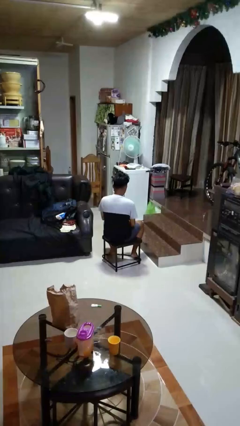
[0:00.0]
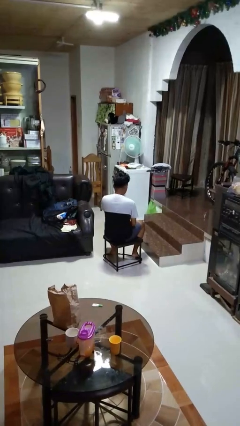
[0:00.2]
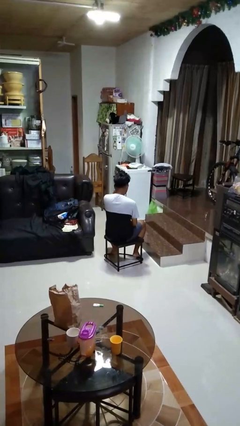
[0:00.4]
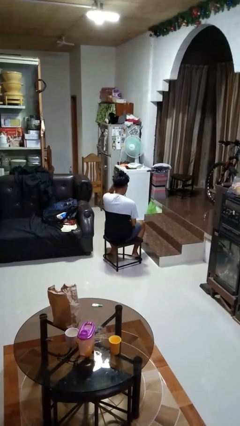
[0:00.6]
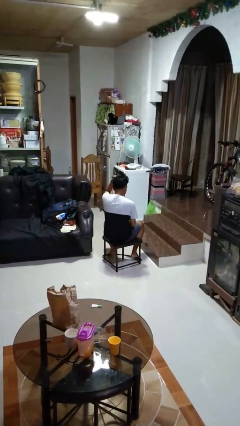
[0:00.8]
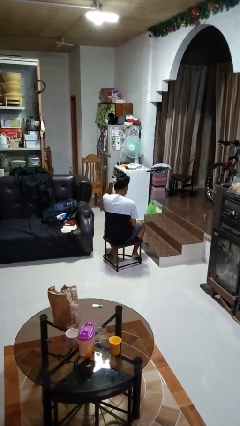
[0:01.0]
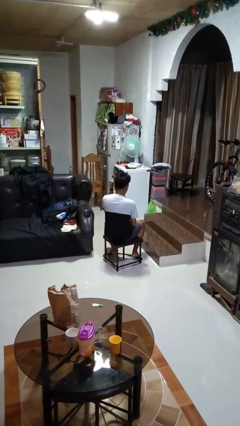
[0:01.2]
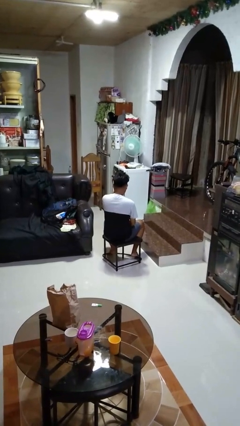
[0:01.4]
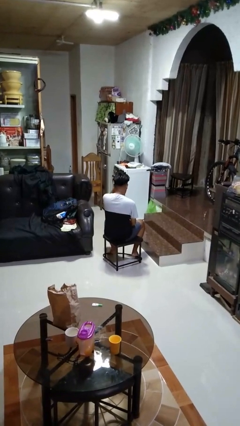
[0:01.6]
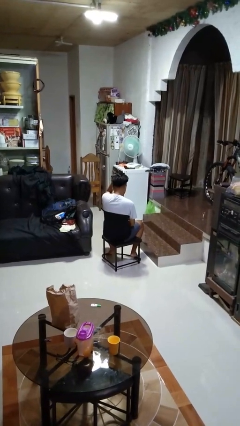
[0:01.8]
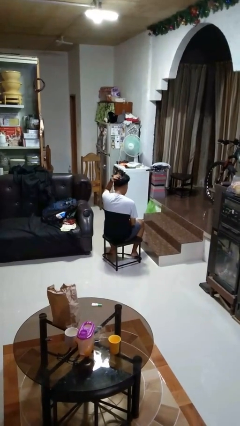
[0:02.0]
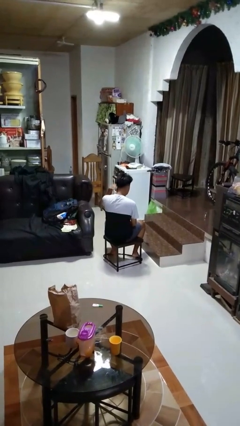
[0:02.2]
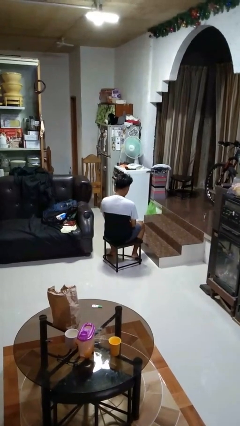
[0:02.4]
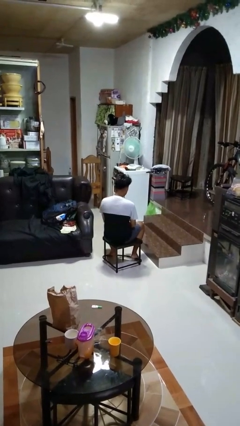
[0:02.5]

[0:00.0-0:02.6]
person strokes hair

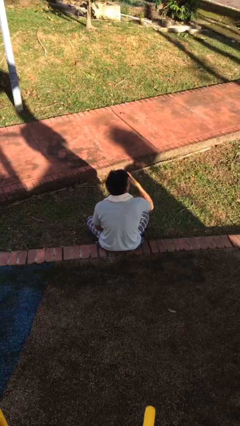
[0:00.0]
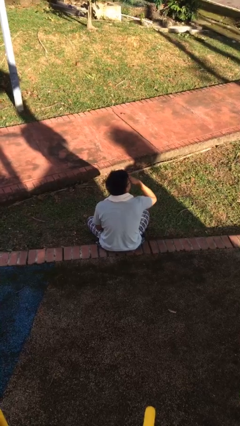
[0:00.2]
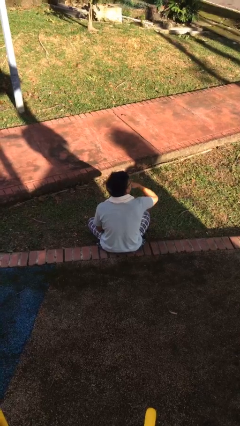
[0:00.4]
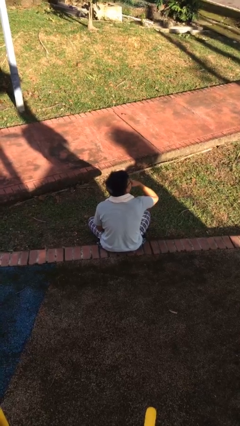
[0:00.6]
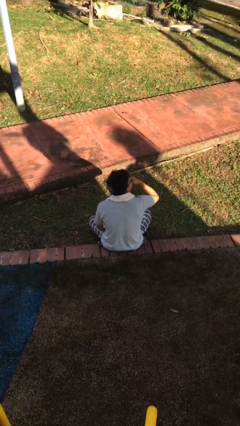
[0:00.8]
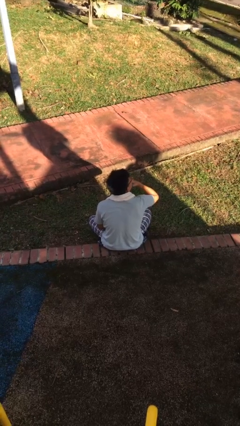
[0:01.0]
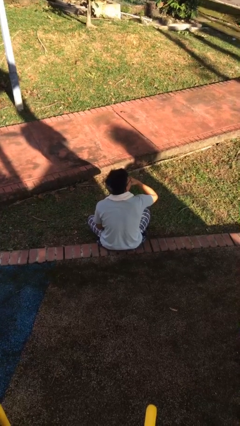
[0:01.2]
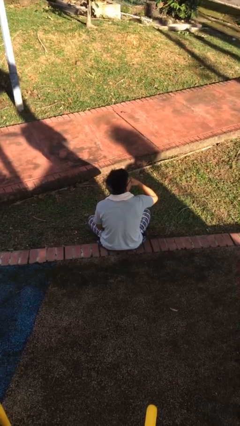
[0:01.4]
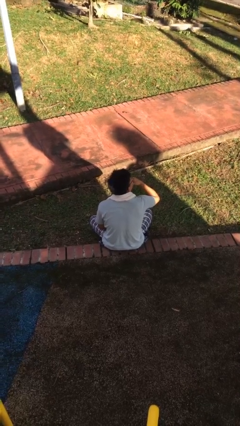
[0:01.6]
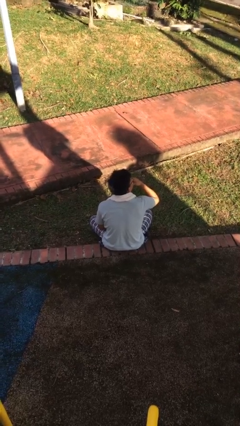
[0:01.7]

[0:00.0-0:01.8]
person strokes chin

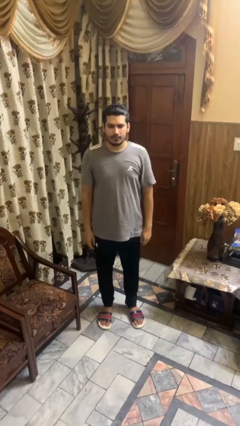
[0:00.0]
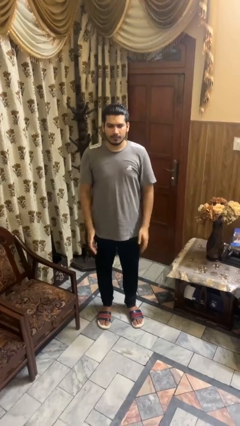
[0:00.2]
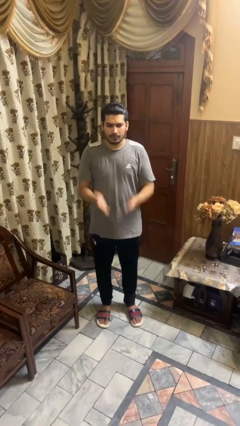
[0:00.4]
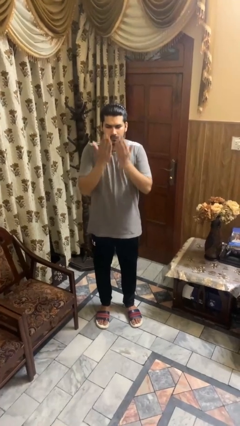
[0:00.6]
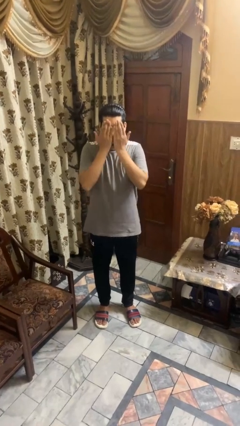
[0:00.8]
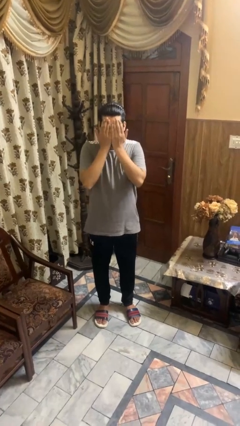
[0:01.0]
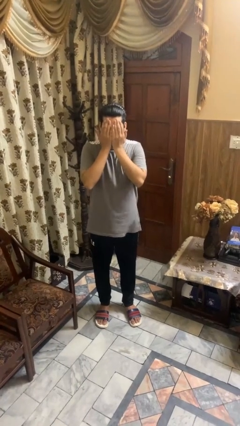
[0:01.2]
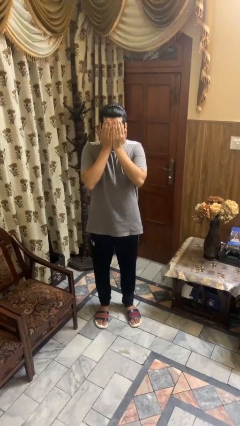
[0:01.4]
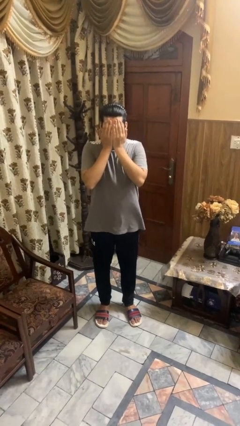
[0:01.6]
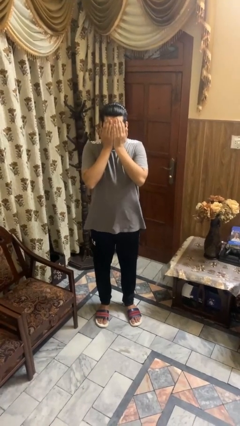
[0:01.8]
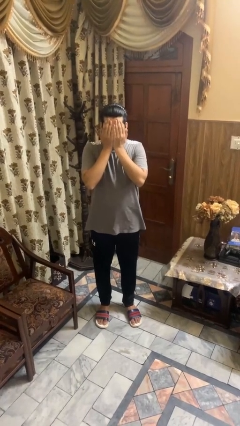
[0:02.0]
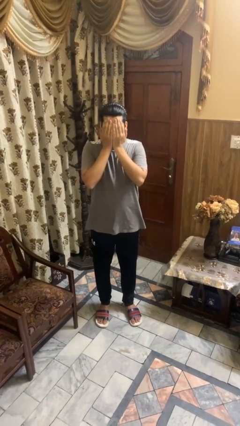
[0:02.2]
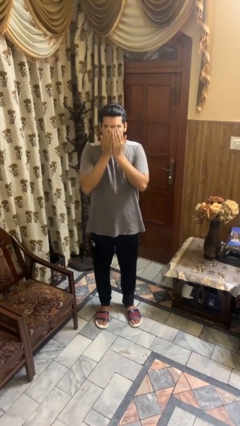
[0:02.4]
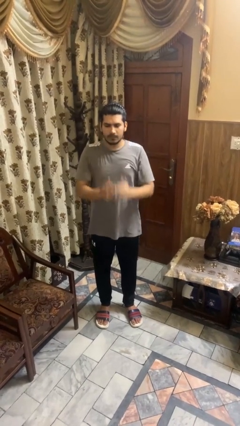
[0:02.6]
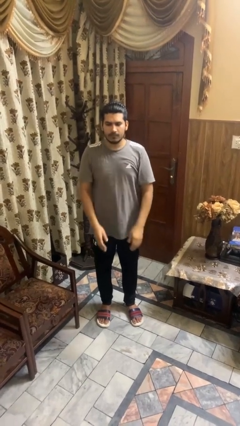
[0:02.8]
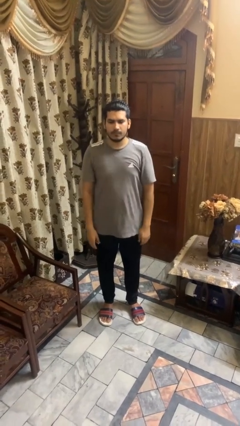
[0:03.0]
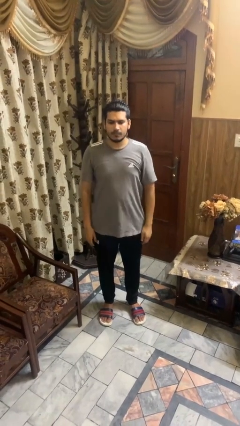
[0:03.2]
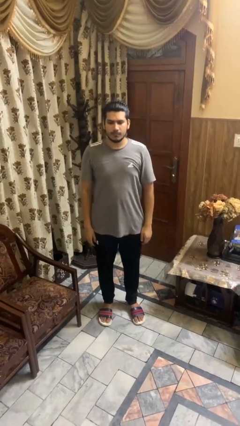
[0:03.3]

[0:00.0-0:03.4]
person covers face with hands

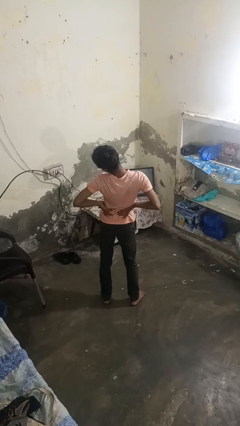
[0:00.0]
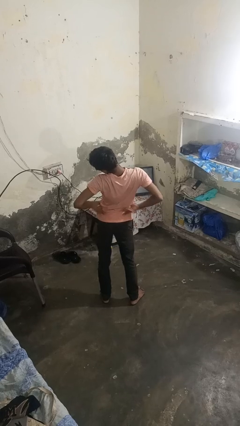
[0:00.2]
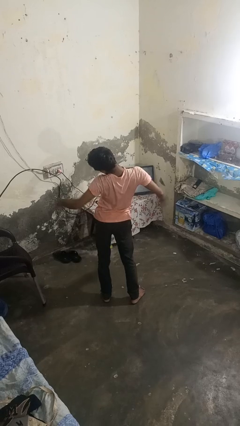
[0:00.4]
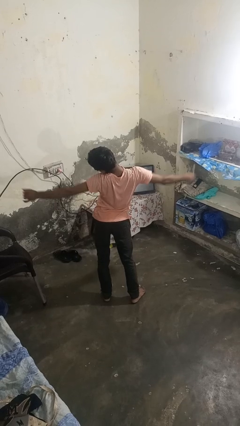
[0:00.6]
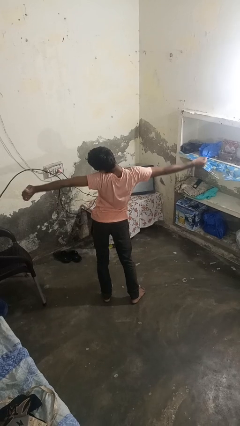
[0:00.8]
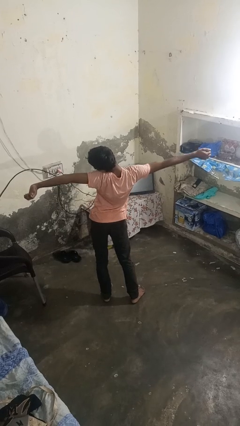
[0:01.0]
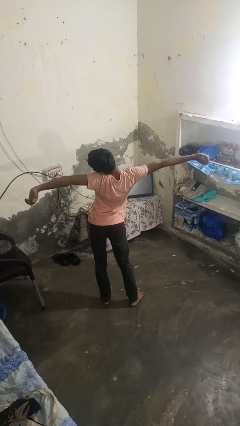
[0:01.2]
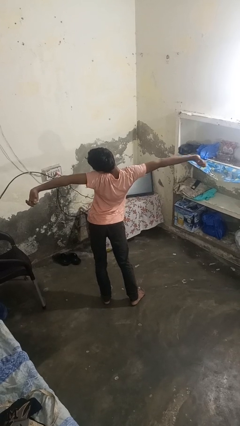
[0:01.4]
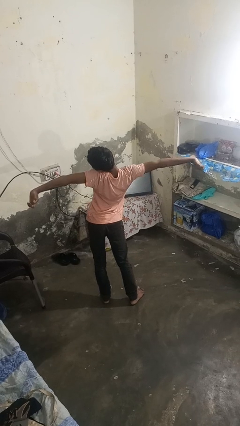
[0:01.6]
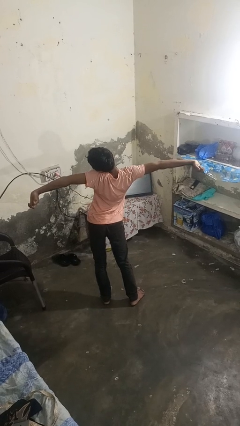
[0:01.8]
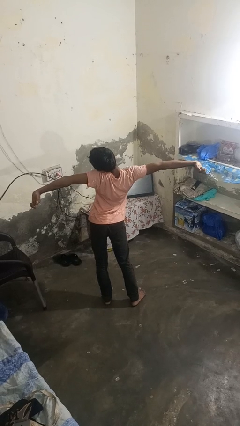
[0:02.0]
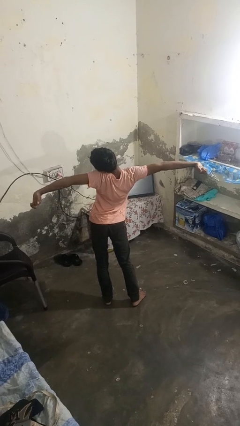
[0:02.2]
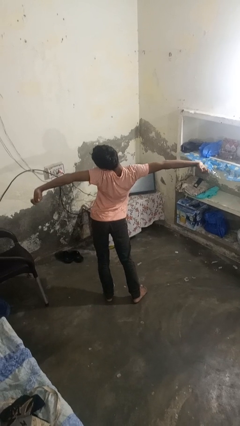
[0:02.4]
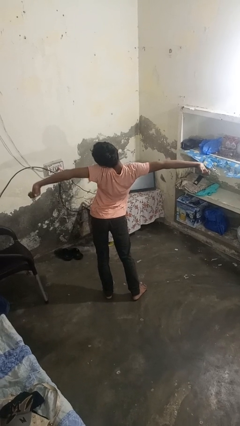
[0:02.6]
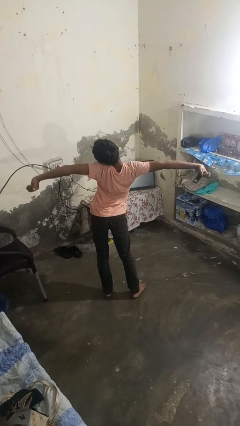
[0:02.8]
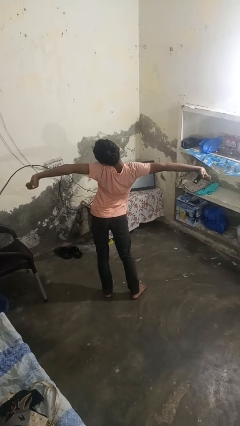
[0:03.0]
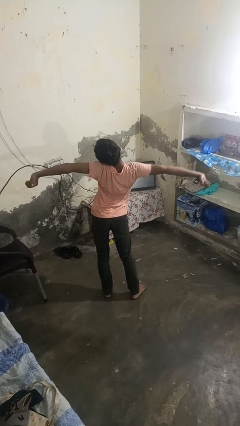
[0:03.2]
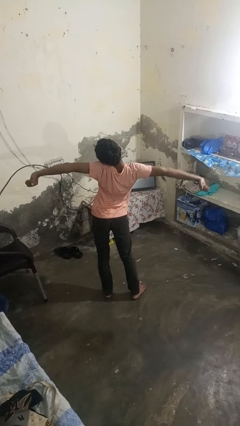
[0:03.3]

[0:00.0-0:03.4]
person stretches arms to side

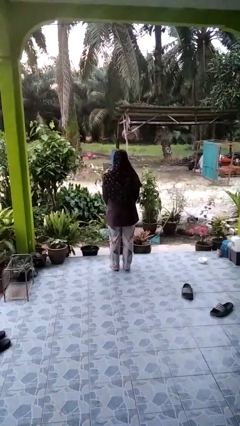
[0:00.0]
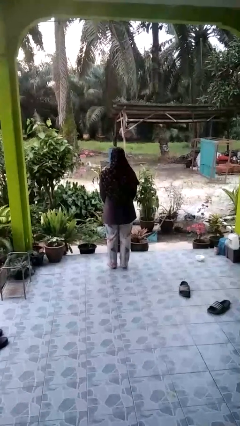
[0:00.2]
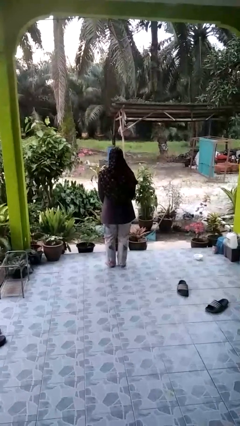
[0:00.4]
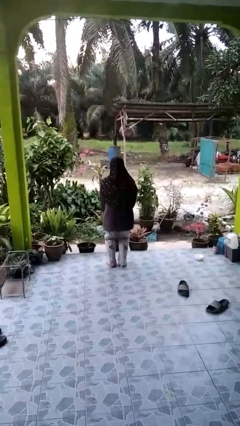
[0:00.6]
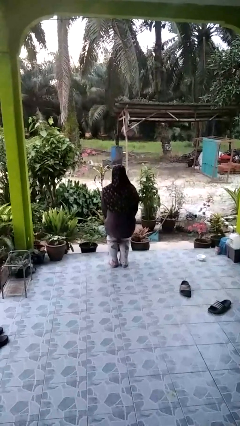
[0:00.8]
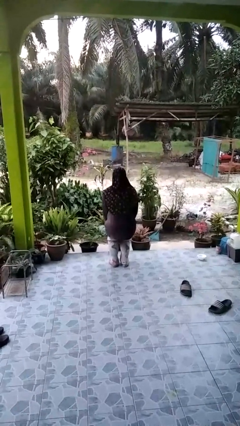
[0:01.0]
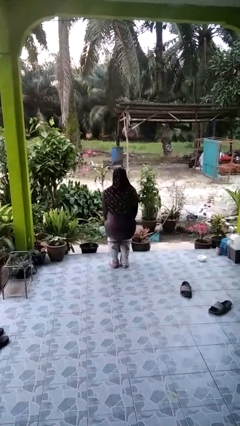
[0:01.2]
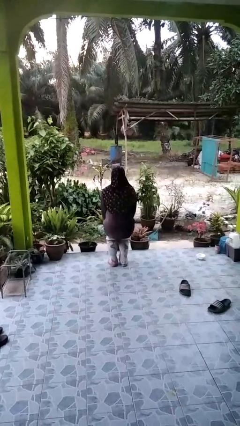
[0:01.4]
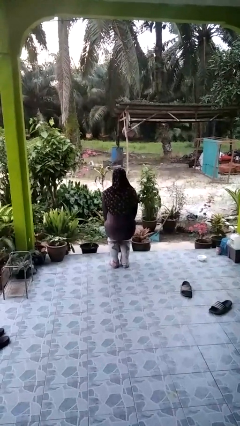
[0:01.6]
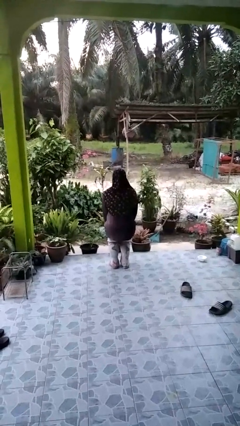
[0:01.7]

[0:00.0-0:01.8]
person squats

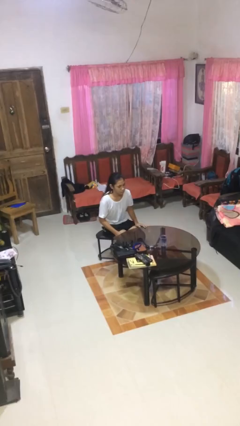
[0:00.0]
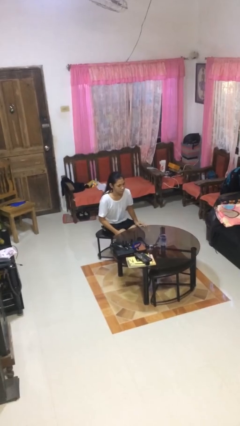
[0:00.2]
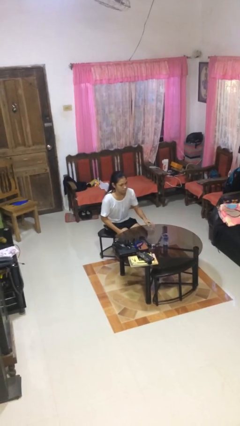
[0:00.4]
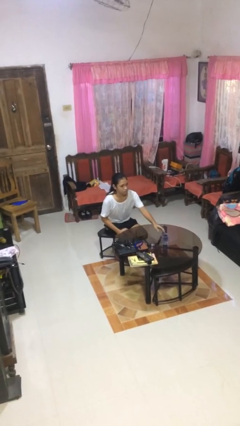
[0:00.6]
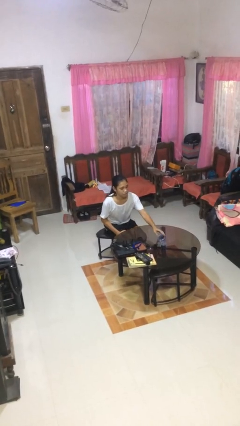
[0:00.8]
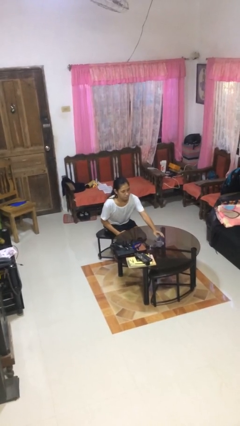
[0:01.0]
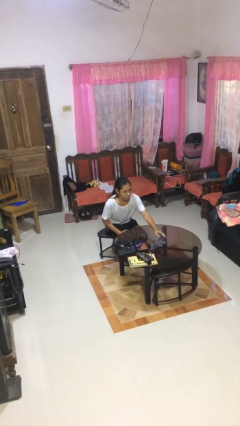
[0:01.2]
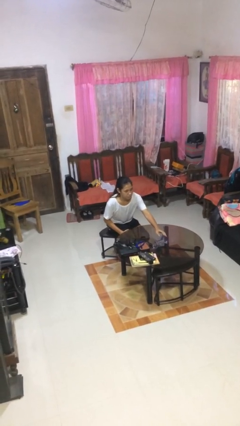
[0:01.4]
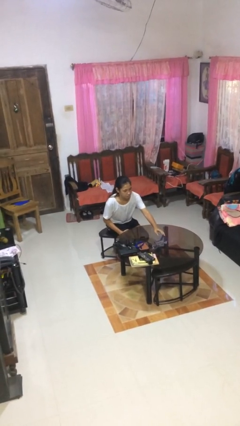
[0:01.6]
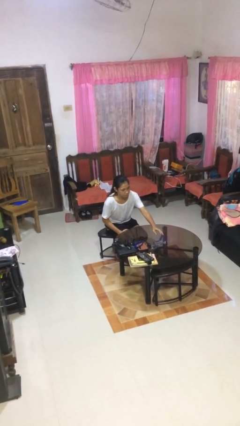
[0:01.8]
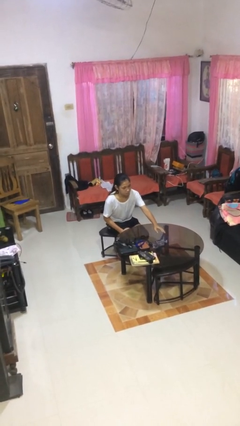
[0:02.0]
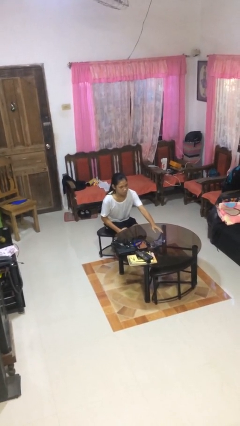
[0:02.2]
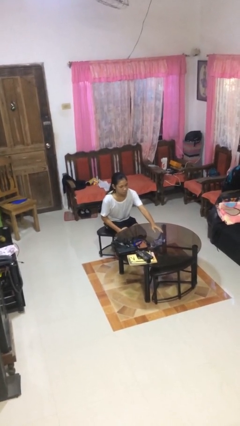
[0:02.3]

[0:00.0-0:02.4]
person knocks over glass

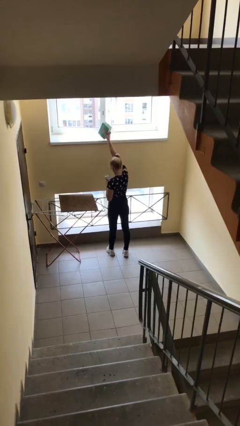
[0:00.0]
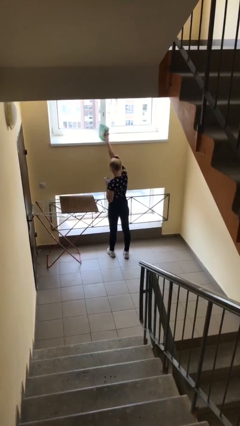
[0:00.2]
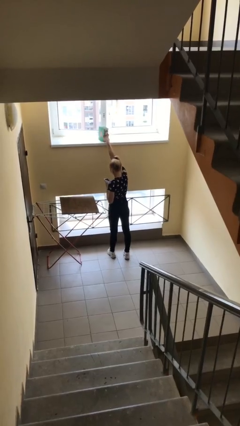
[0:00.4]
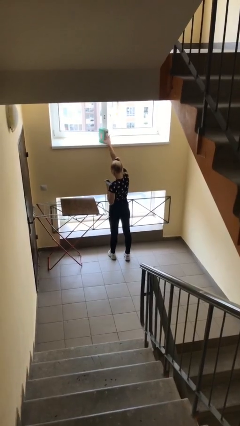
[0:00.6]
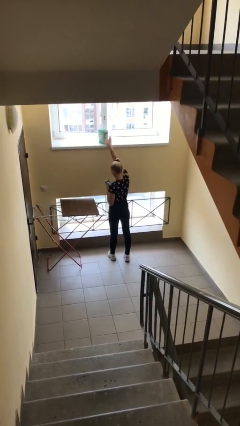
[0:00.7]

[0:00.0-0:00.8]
person puts down object on shelf

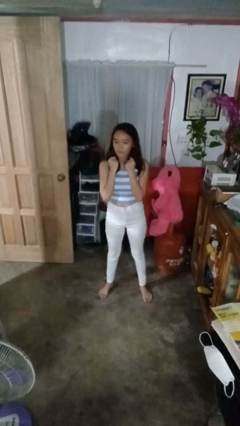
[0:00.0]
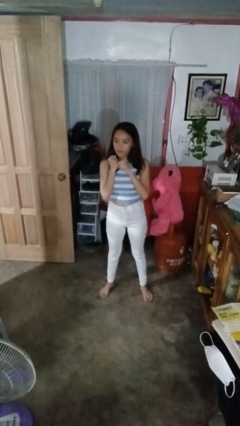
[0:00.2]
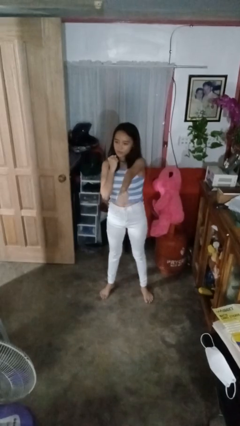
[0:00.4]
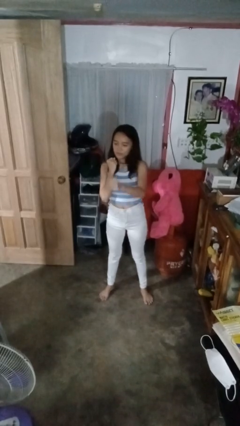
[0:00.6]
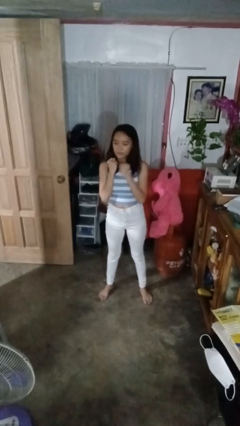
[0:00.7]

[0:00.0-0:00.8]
person punches
